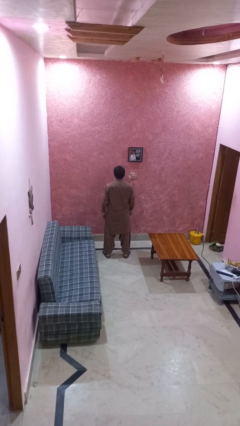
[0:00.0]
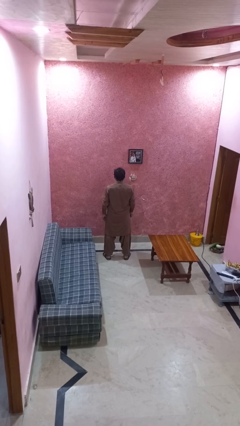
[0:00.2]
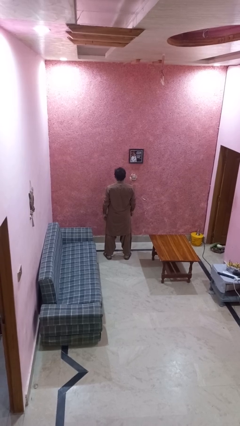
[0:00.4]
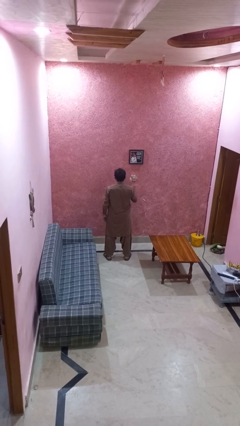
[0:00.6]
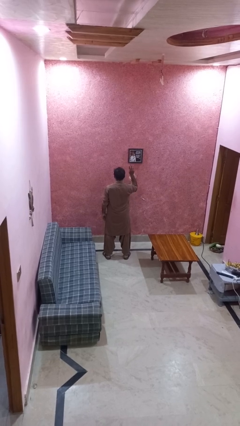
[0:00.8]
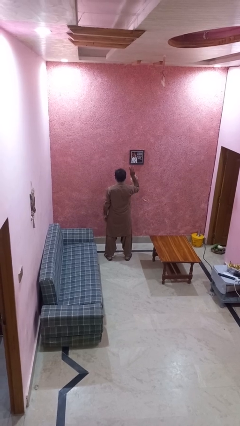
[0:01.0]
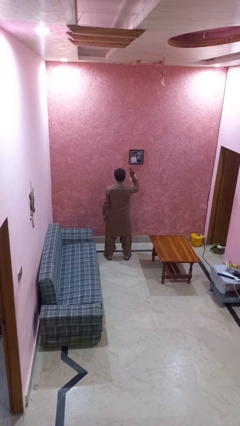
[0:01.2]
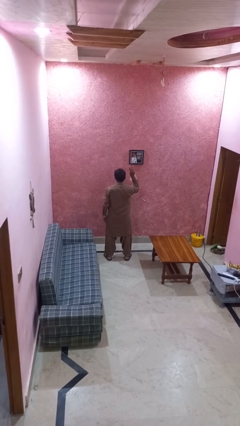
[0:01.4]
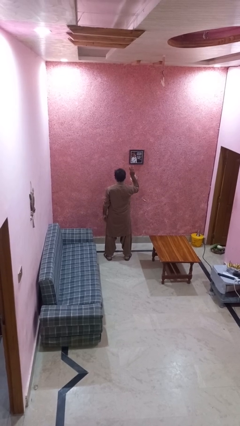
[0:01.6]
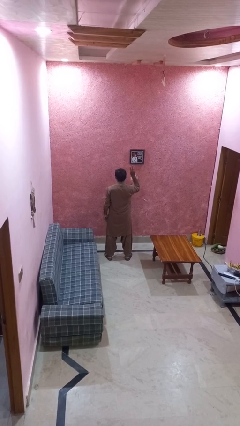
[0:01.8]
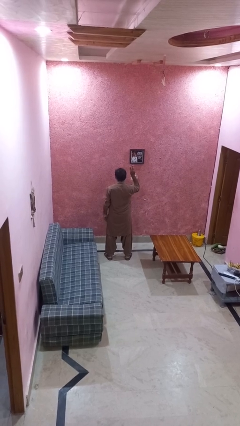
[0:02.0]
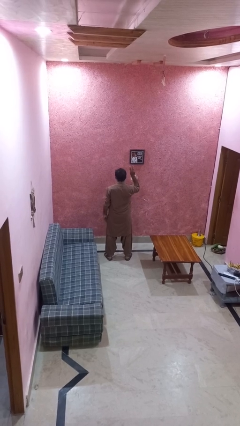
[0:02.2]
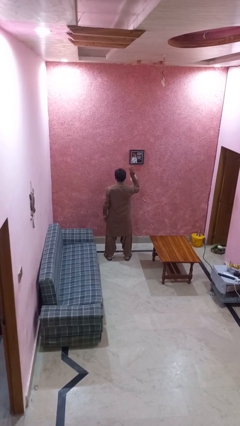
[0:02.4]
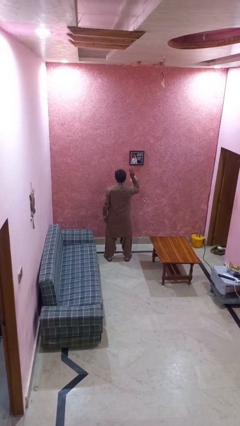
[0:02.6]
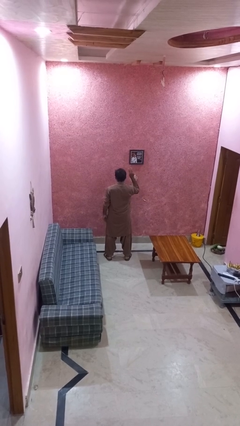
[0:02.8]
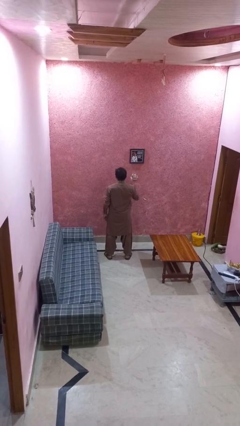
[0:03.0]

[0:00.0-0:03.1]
person gestures number three

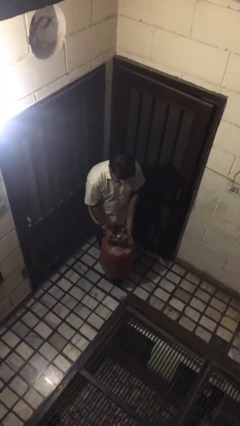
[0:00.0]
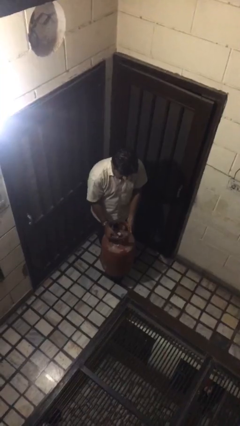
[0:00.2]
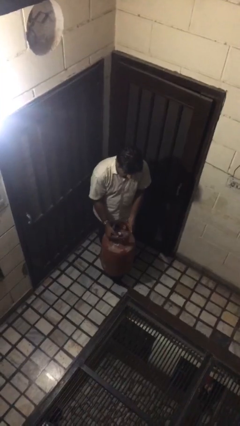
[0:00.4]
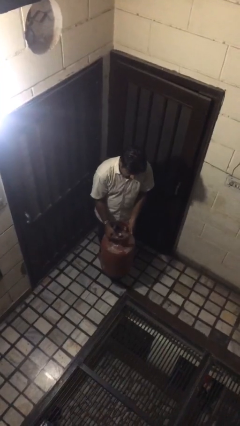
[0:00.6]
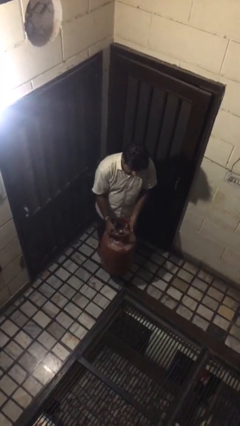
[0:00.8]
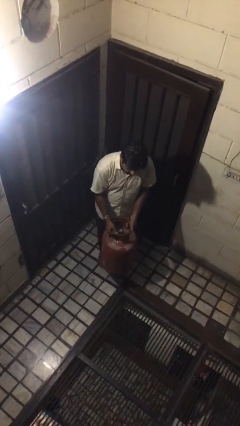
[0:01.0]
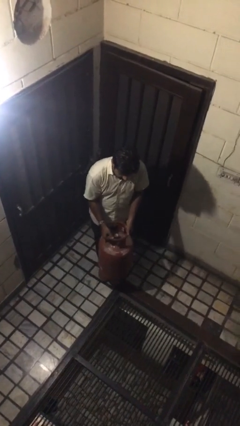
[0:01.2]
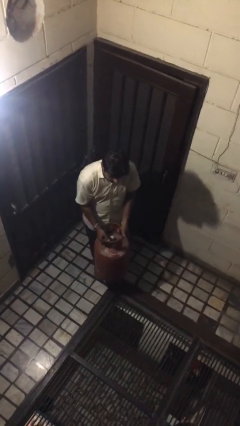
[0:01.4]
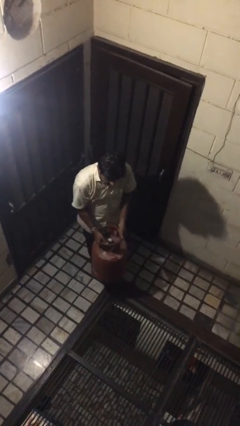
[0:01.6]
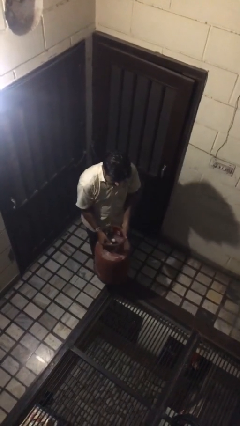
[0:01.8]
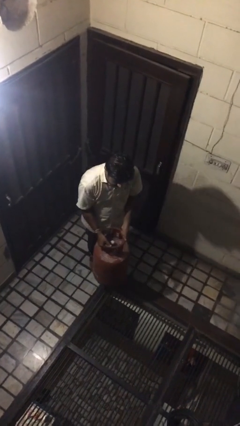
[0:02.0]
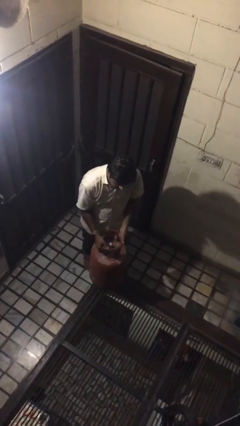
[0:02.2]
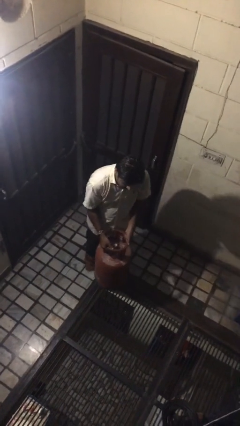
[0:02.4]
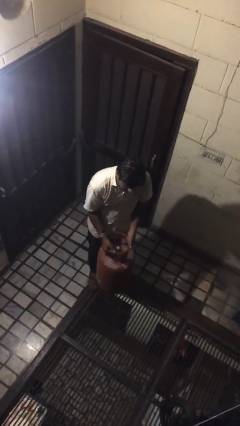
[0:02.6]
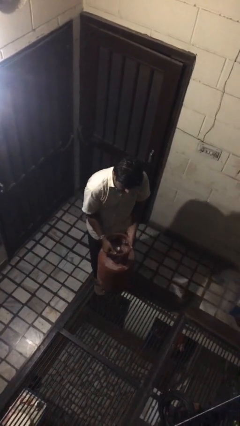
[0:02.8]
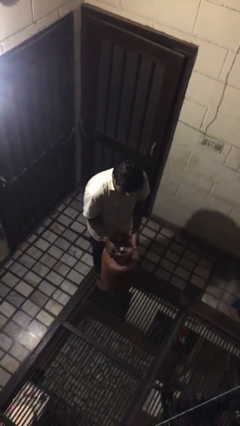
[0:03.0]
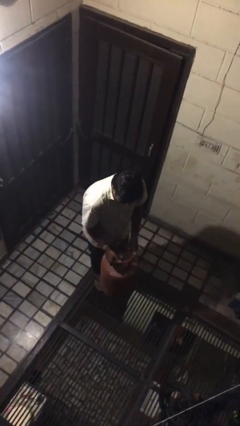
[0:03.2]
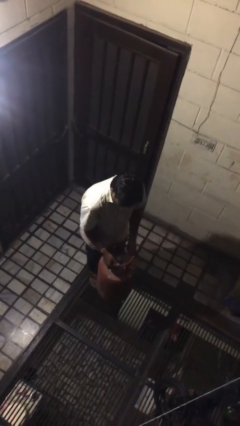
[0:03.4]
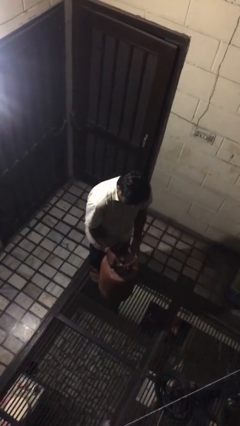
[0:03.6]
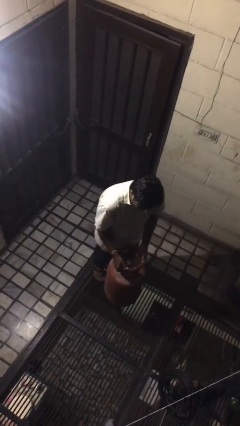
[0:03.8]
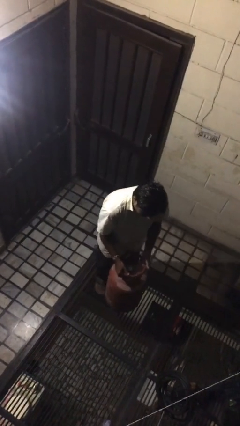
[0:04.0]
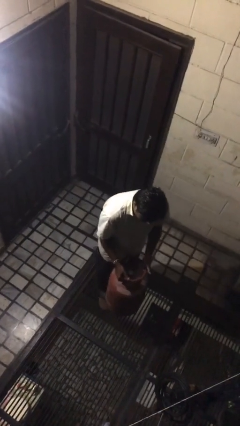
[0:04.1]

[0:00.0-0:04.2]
person carries heavy object

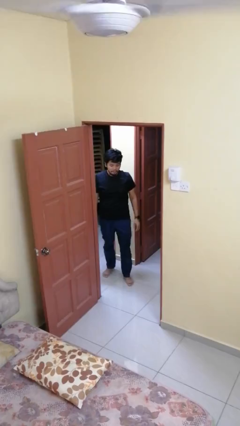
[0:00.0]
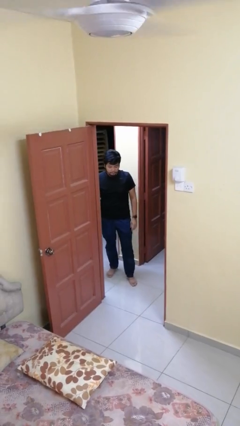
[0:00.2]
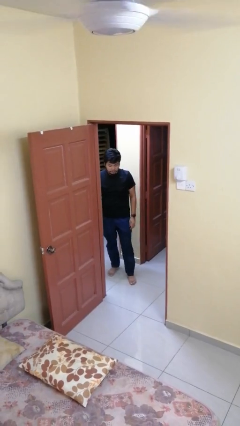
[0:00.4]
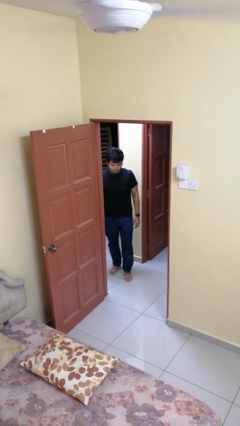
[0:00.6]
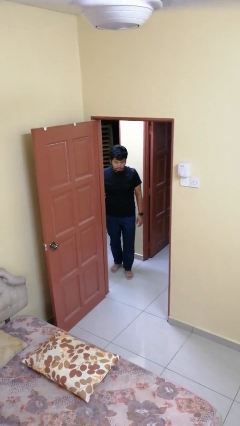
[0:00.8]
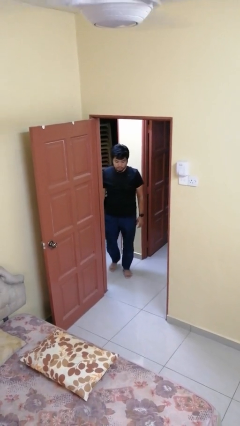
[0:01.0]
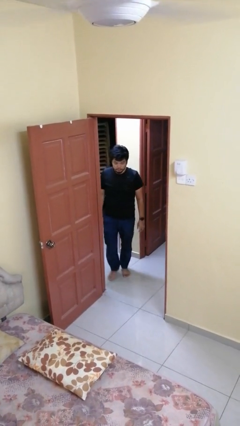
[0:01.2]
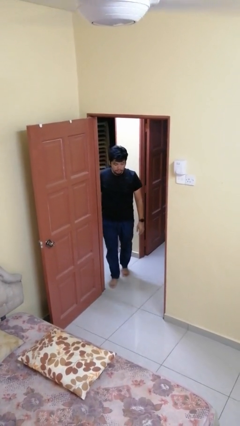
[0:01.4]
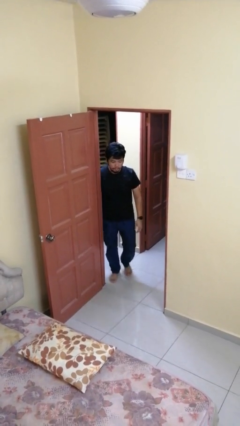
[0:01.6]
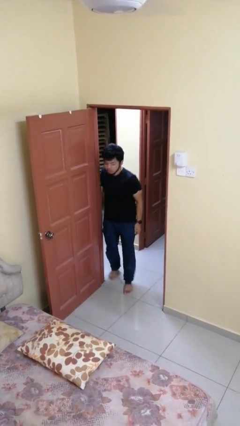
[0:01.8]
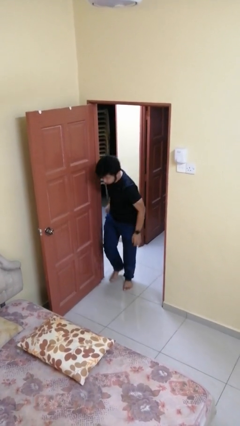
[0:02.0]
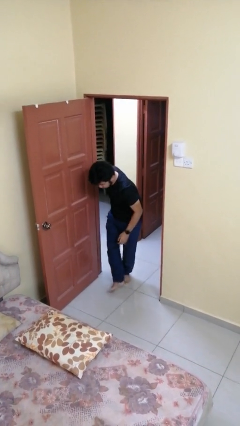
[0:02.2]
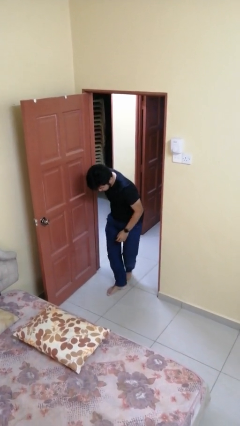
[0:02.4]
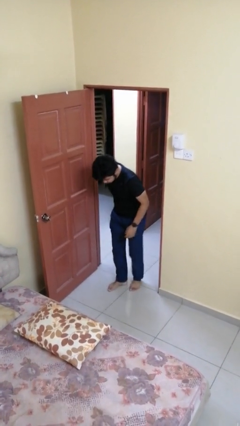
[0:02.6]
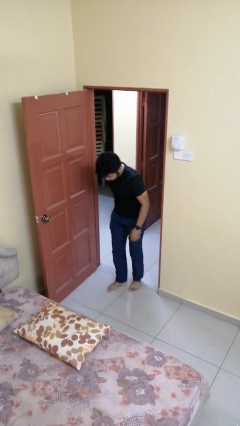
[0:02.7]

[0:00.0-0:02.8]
person bumps into wall

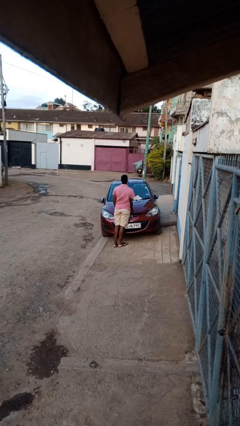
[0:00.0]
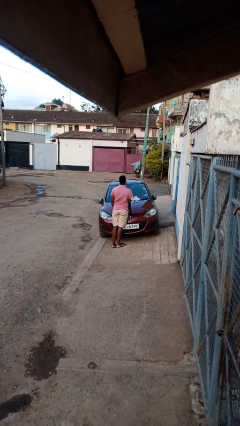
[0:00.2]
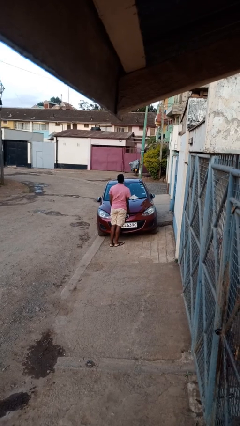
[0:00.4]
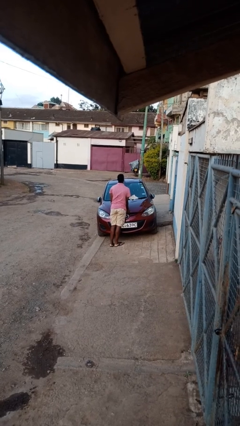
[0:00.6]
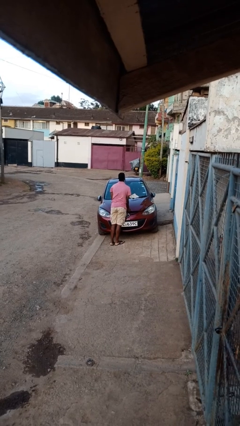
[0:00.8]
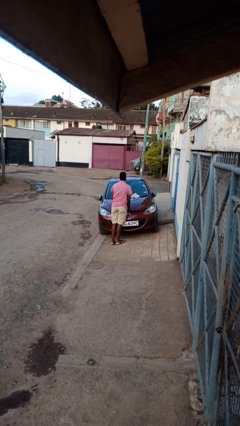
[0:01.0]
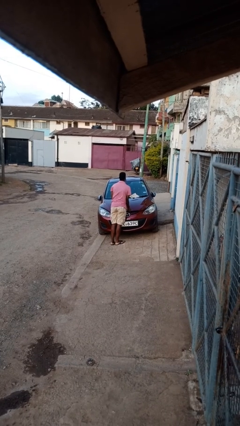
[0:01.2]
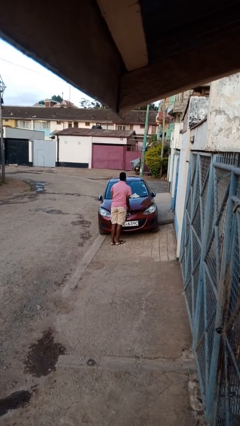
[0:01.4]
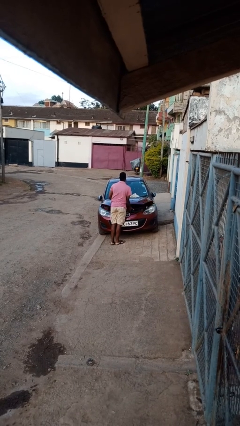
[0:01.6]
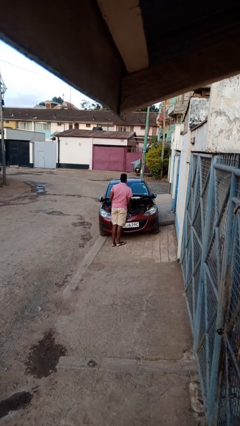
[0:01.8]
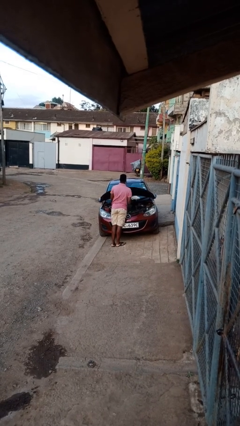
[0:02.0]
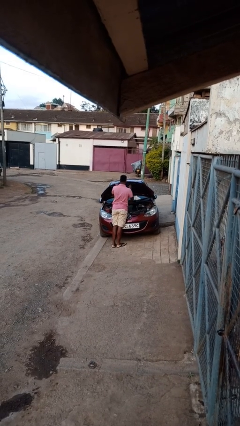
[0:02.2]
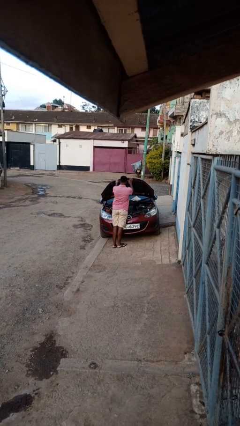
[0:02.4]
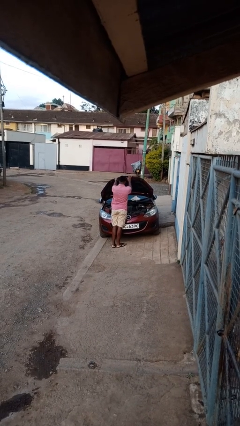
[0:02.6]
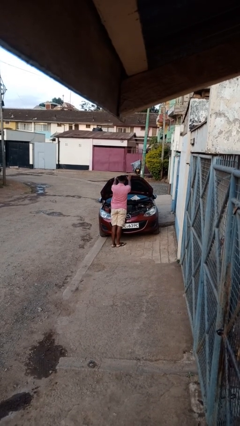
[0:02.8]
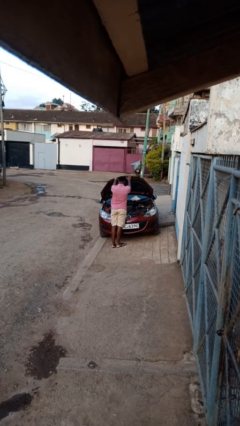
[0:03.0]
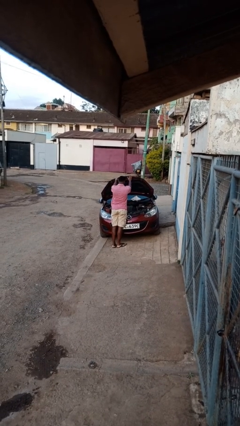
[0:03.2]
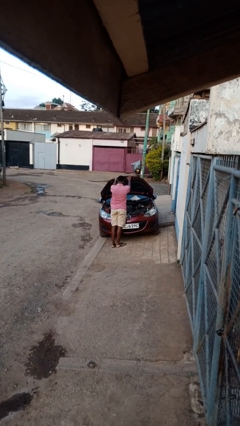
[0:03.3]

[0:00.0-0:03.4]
person opens car hood

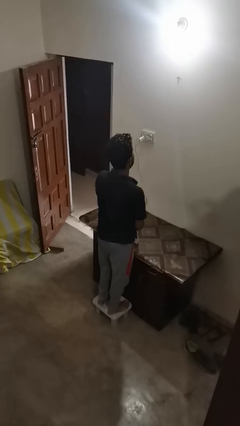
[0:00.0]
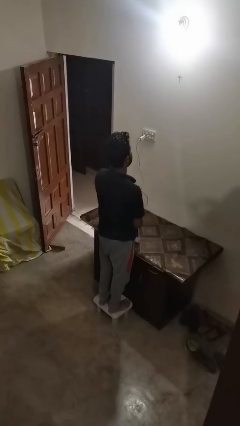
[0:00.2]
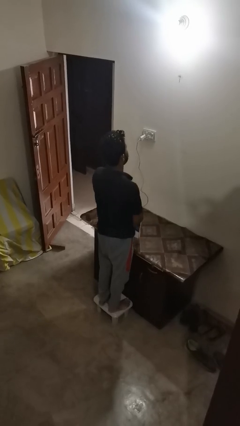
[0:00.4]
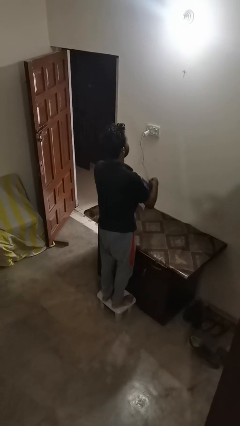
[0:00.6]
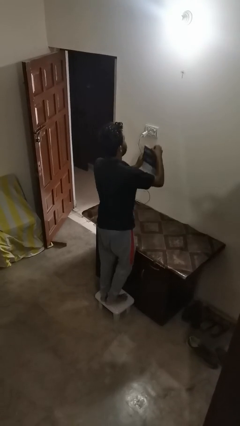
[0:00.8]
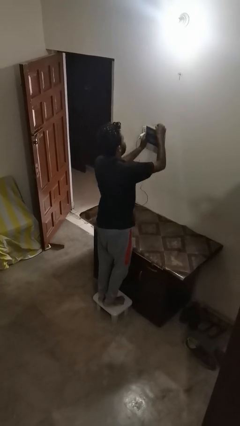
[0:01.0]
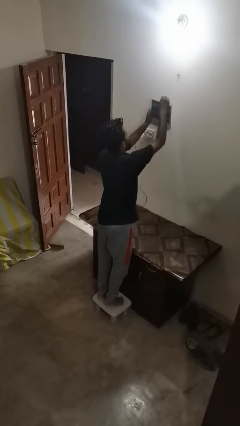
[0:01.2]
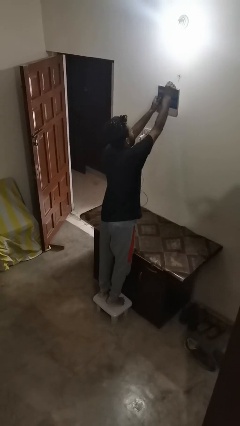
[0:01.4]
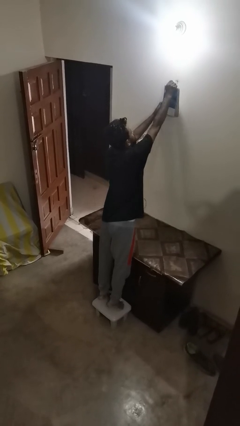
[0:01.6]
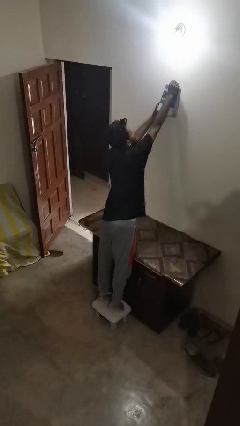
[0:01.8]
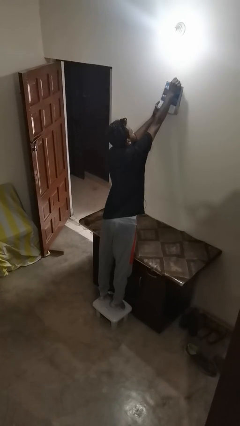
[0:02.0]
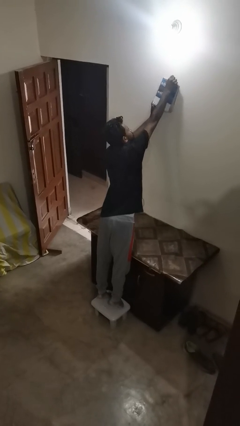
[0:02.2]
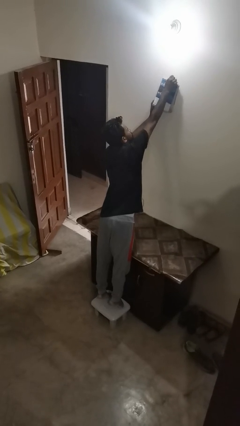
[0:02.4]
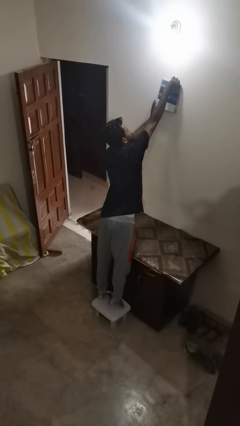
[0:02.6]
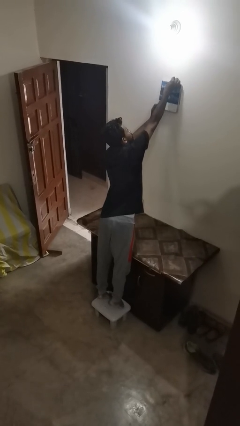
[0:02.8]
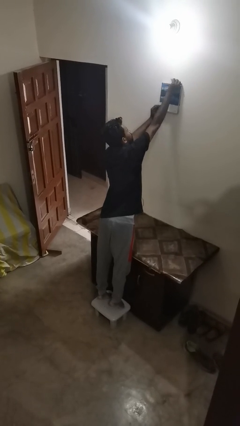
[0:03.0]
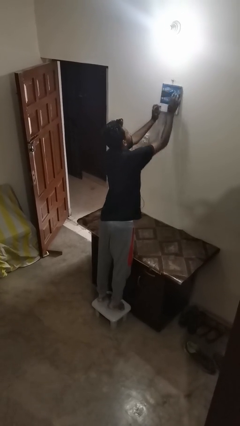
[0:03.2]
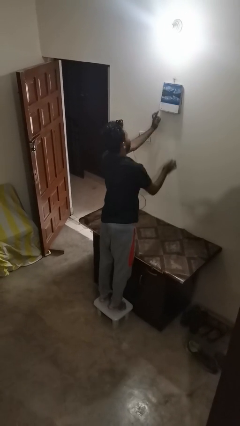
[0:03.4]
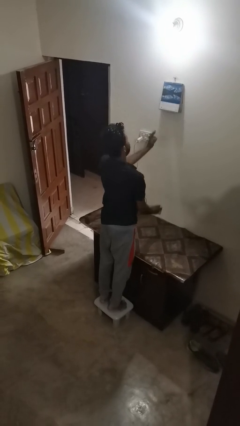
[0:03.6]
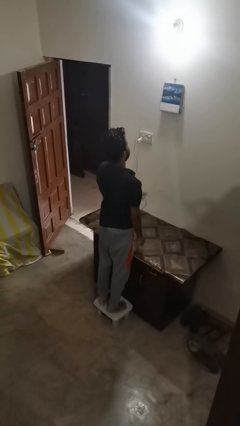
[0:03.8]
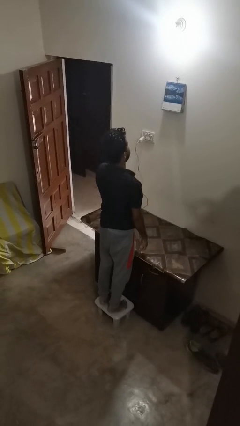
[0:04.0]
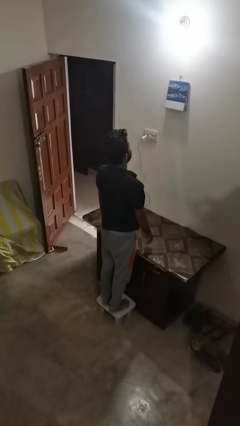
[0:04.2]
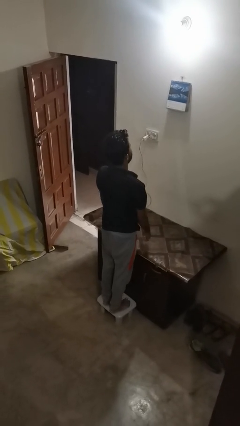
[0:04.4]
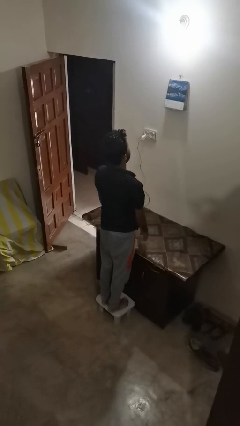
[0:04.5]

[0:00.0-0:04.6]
person puts up picture frame
